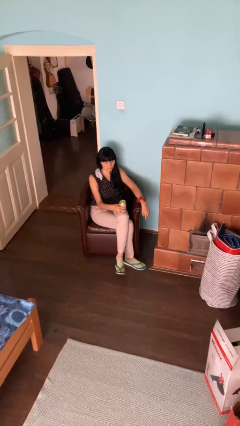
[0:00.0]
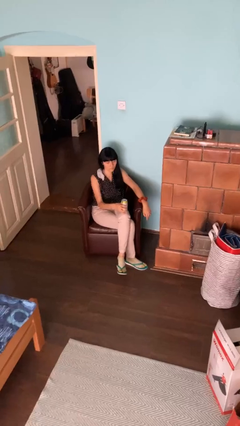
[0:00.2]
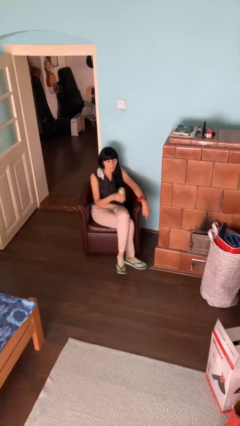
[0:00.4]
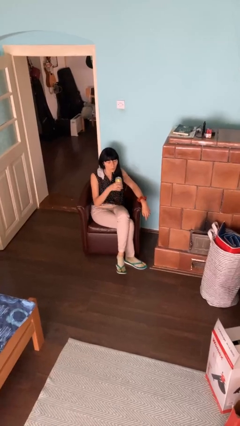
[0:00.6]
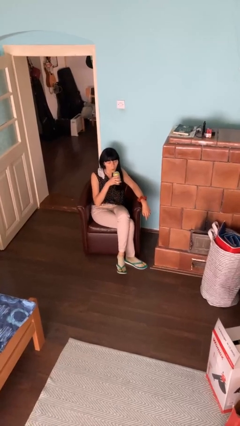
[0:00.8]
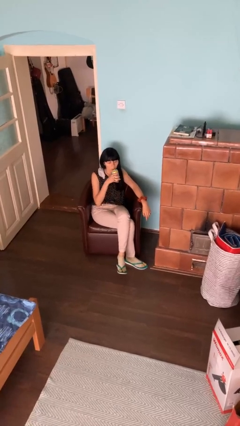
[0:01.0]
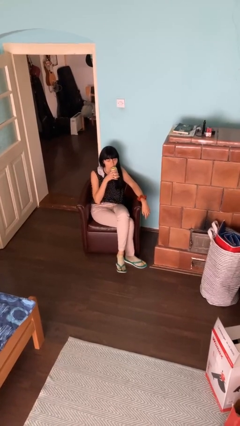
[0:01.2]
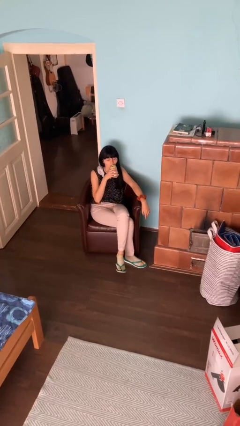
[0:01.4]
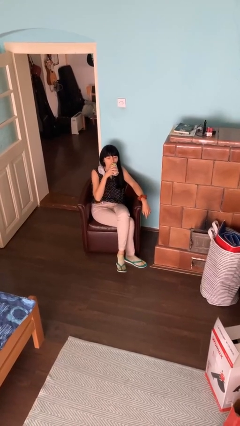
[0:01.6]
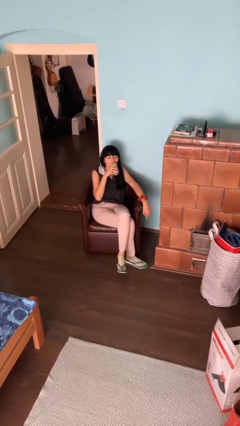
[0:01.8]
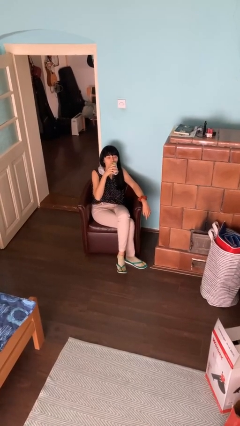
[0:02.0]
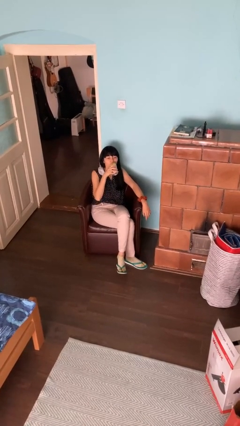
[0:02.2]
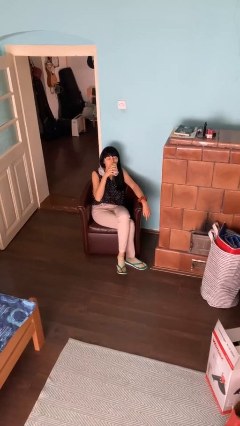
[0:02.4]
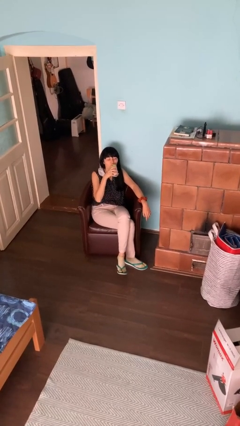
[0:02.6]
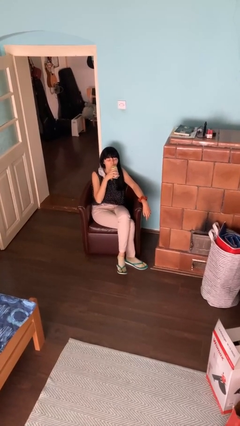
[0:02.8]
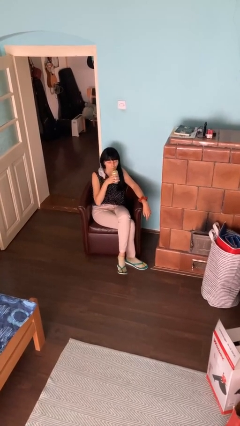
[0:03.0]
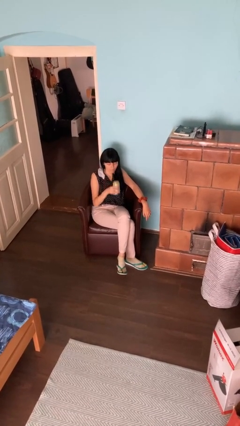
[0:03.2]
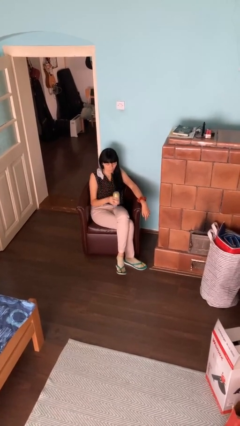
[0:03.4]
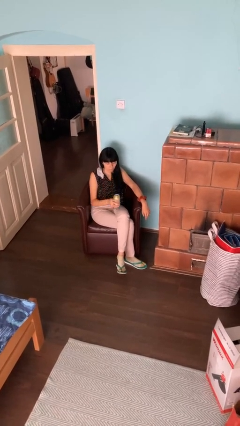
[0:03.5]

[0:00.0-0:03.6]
person drinks from beverage can

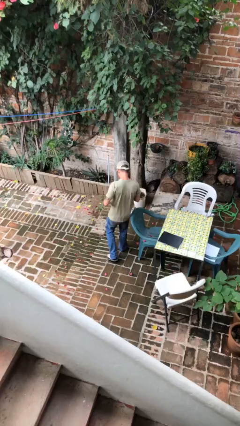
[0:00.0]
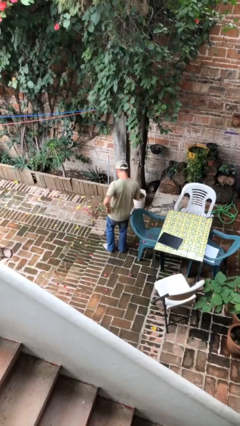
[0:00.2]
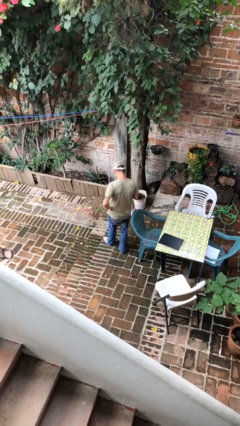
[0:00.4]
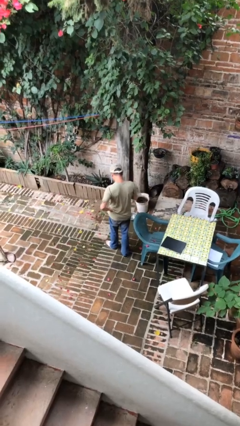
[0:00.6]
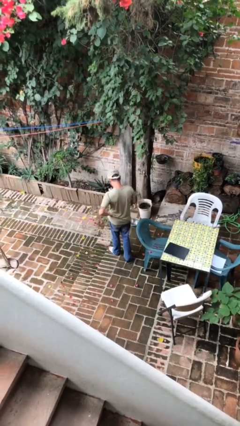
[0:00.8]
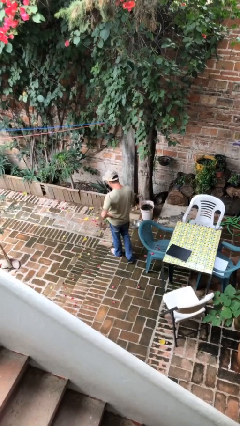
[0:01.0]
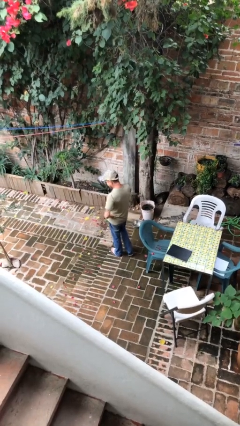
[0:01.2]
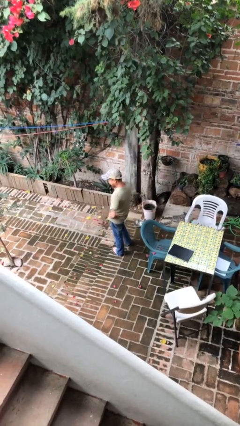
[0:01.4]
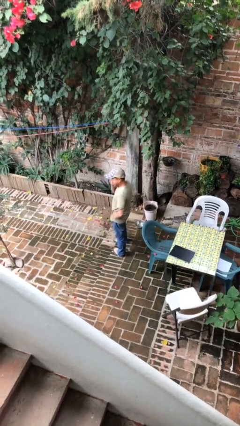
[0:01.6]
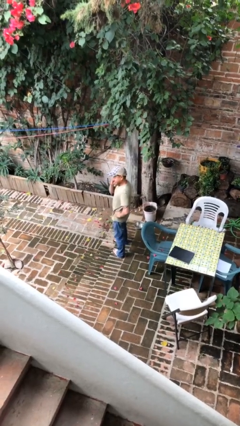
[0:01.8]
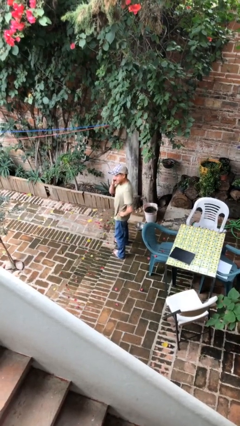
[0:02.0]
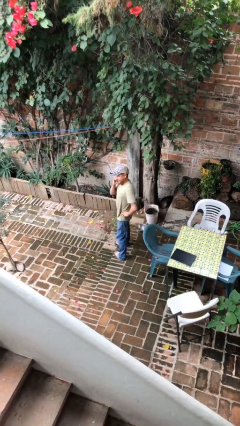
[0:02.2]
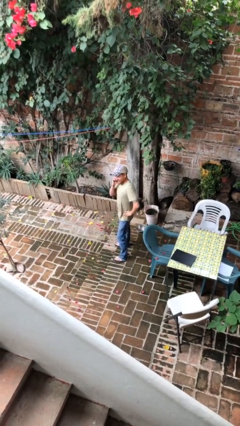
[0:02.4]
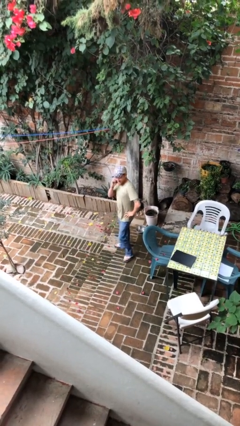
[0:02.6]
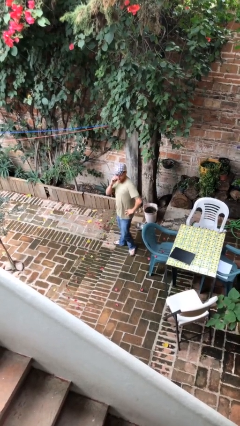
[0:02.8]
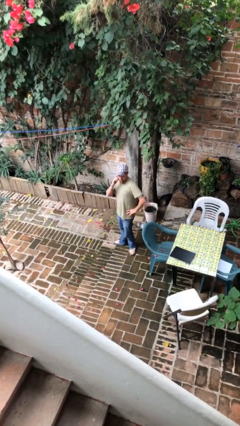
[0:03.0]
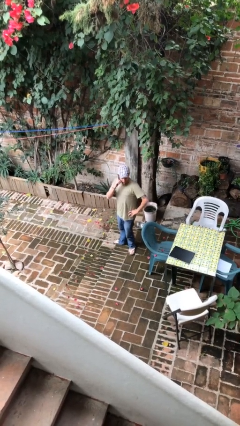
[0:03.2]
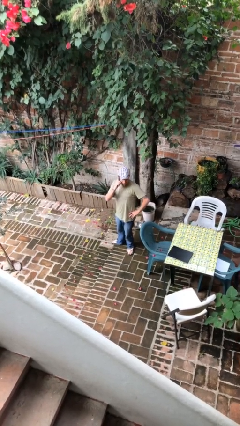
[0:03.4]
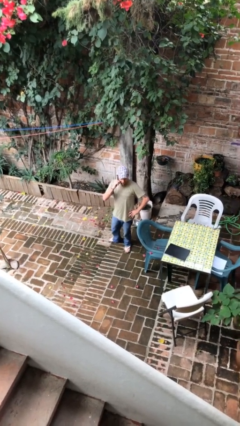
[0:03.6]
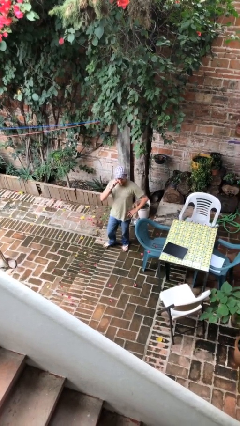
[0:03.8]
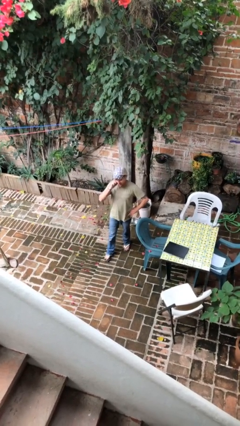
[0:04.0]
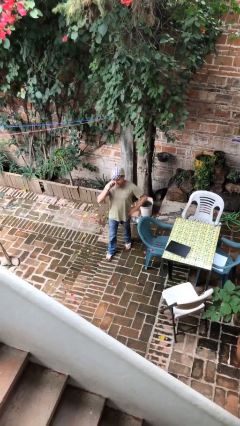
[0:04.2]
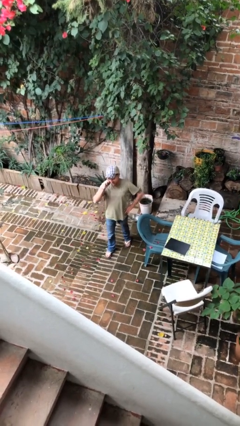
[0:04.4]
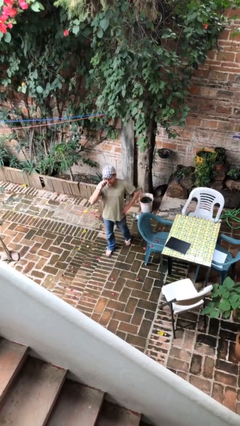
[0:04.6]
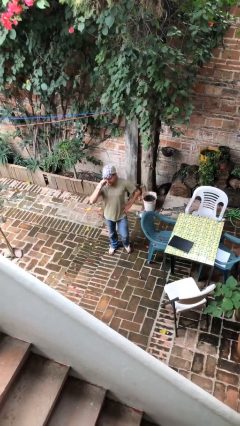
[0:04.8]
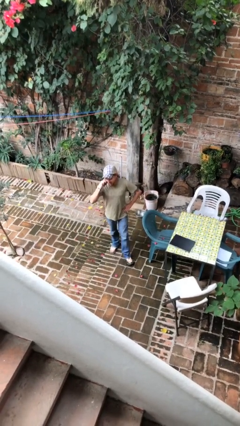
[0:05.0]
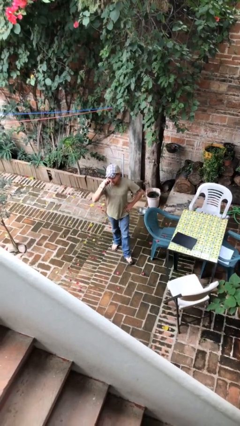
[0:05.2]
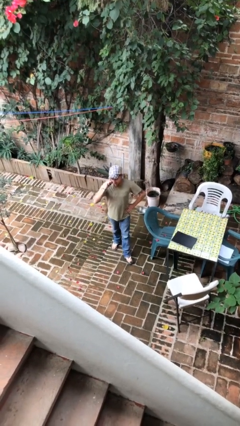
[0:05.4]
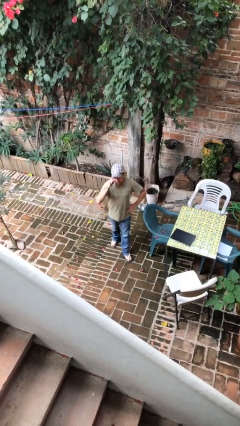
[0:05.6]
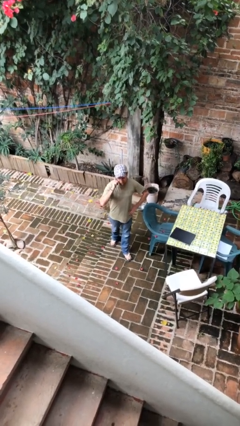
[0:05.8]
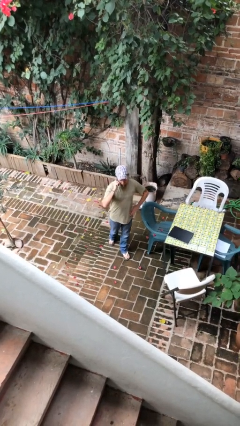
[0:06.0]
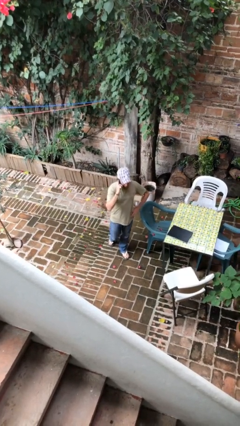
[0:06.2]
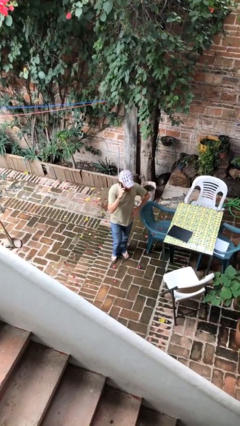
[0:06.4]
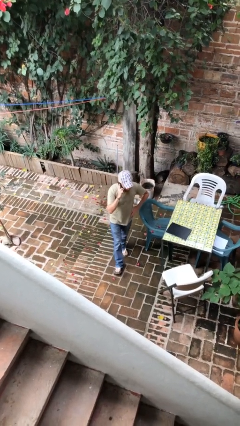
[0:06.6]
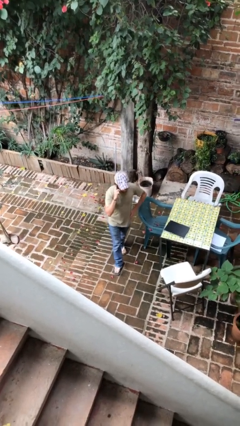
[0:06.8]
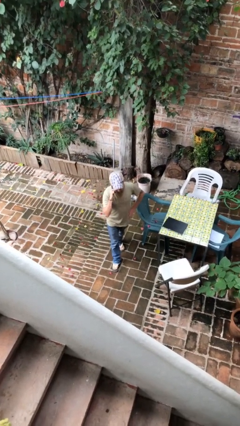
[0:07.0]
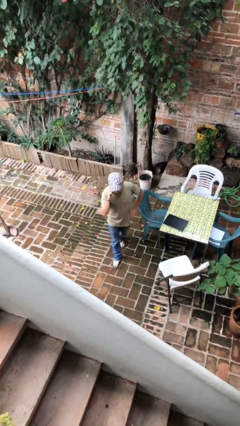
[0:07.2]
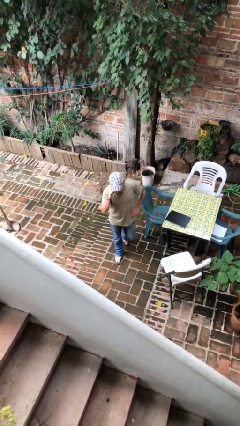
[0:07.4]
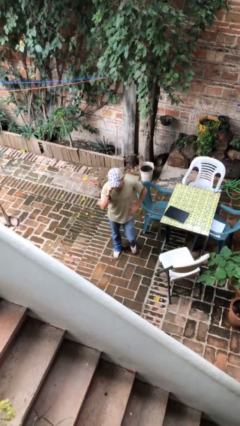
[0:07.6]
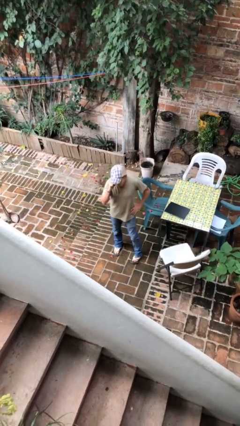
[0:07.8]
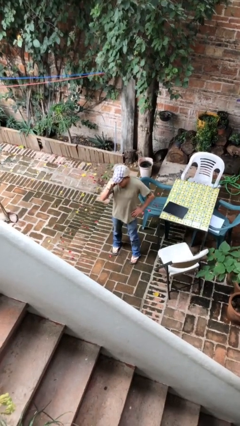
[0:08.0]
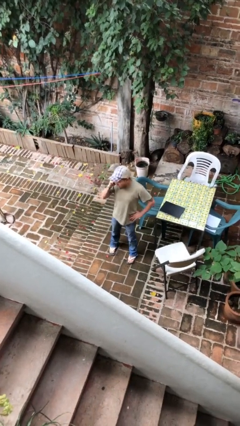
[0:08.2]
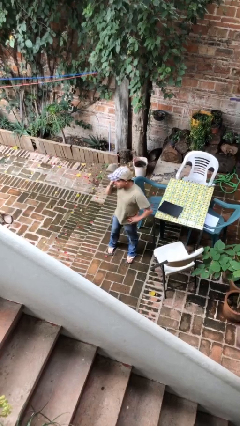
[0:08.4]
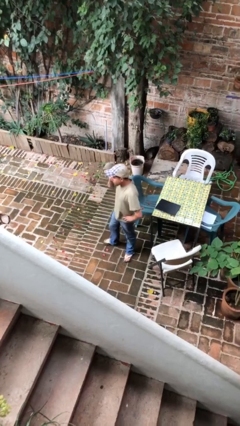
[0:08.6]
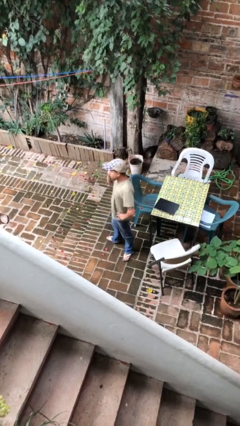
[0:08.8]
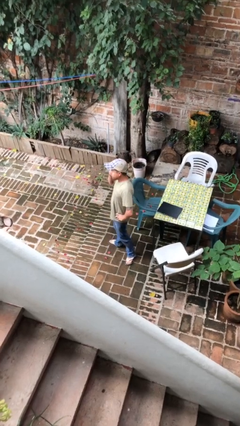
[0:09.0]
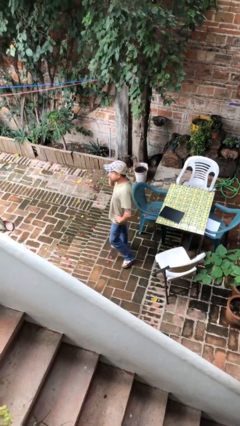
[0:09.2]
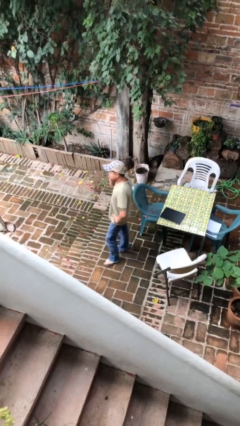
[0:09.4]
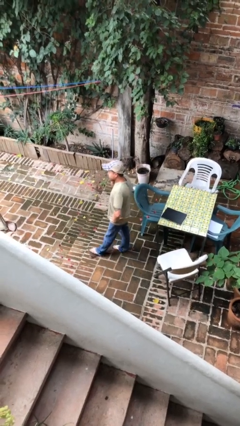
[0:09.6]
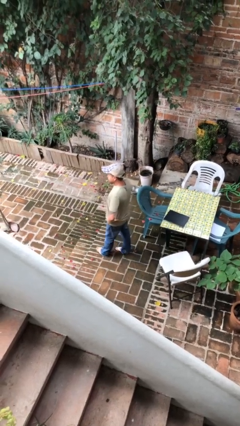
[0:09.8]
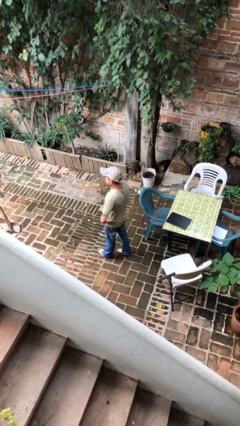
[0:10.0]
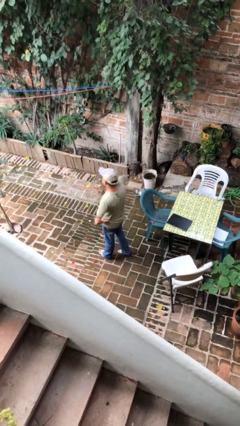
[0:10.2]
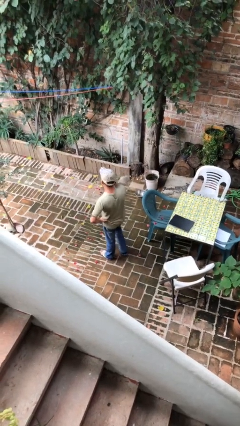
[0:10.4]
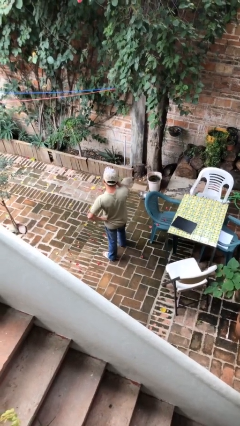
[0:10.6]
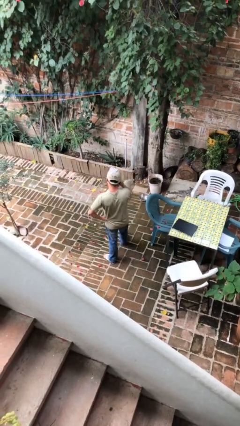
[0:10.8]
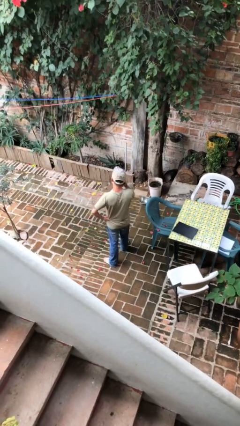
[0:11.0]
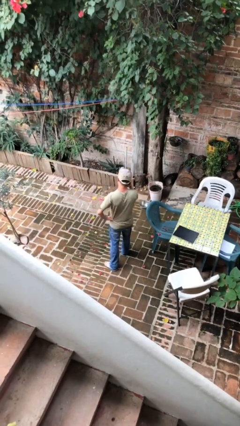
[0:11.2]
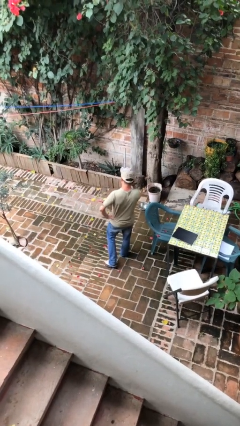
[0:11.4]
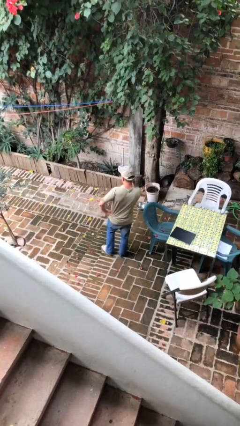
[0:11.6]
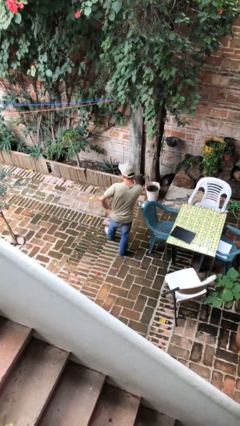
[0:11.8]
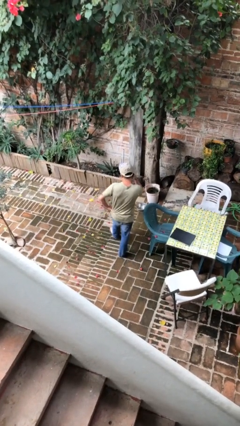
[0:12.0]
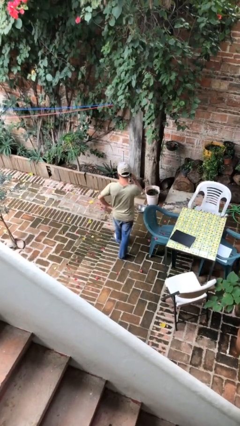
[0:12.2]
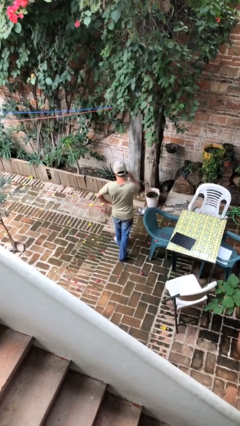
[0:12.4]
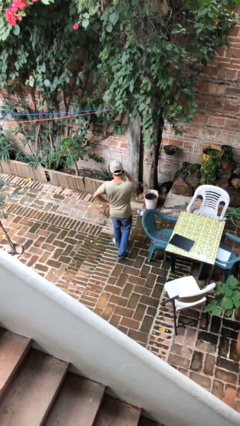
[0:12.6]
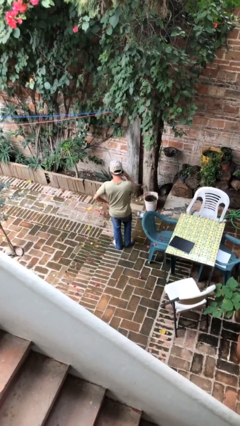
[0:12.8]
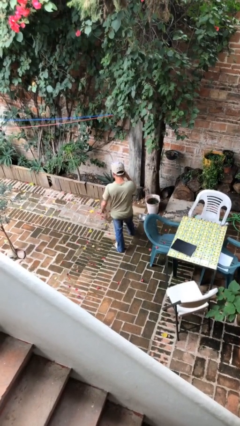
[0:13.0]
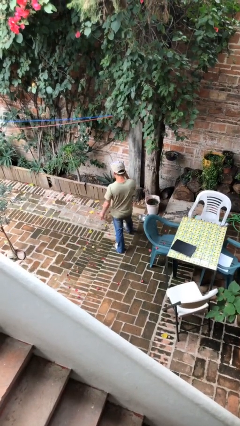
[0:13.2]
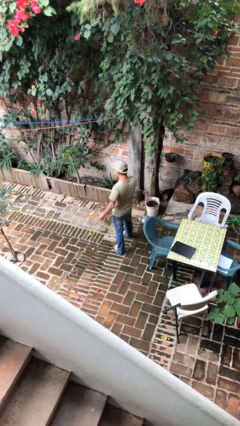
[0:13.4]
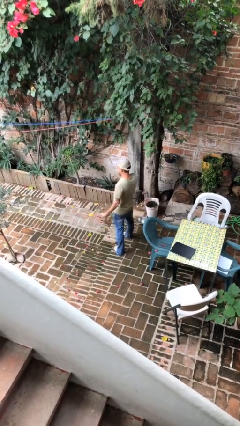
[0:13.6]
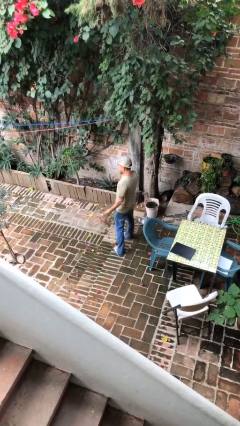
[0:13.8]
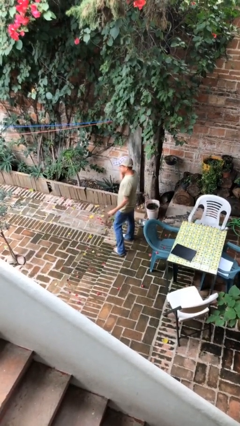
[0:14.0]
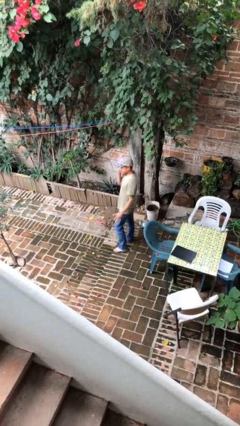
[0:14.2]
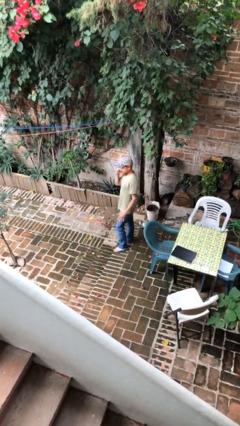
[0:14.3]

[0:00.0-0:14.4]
person talks on phone

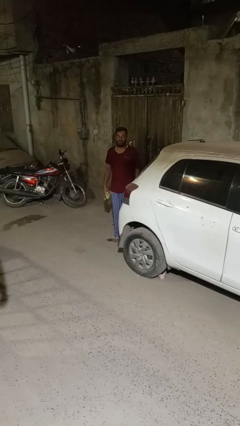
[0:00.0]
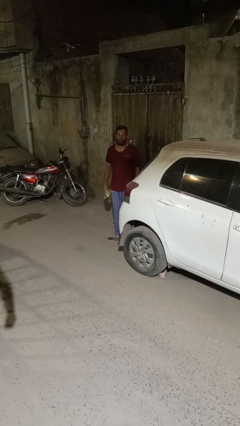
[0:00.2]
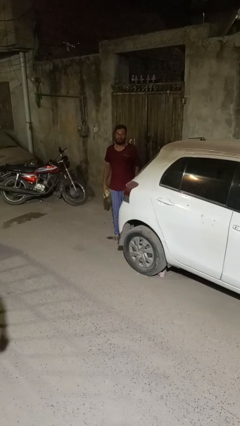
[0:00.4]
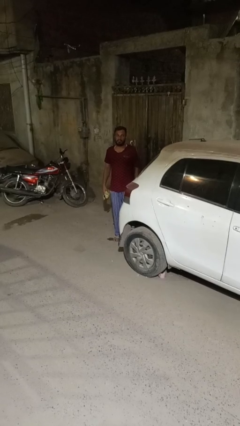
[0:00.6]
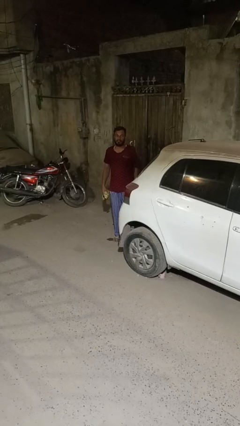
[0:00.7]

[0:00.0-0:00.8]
person walks around car
